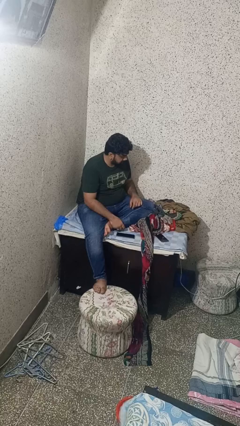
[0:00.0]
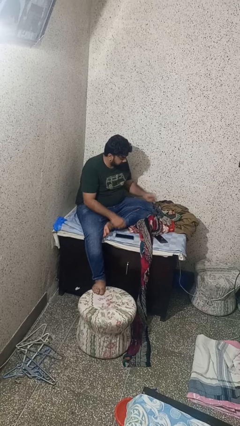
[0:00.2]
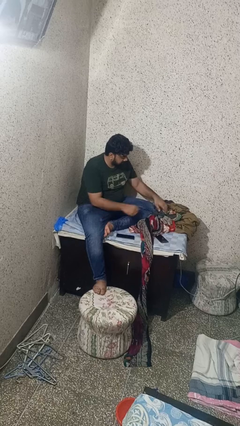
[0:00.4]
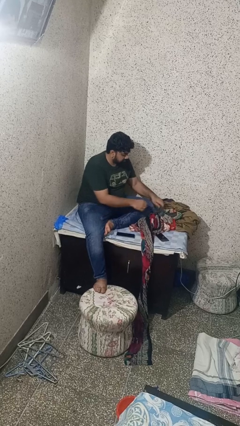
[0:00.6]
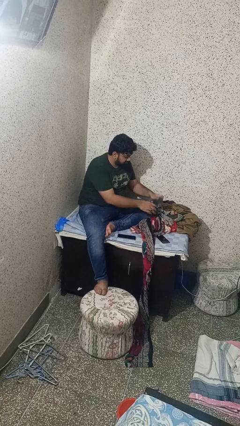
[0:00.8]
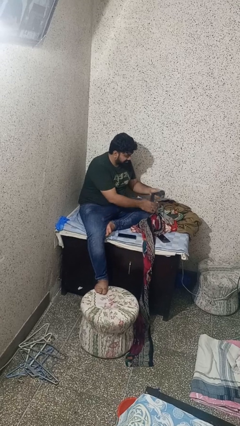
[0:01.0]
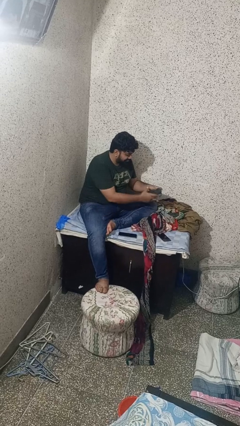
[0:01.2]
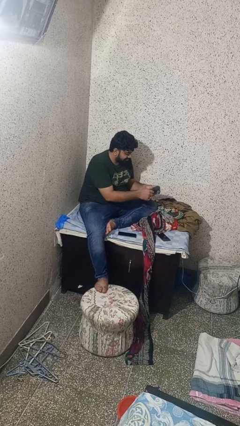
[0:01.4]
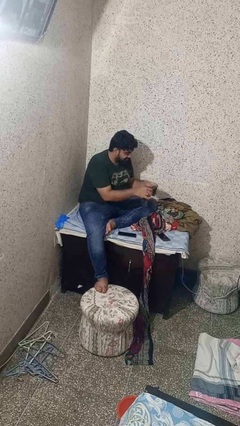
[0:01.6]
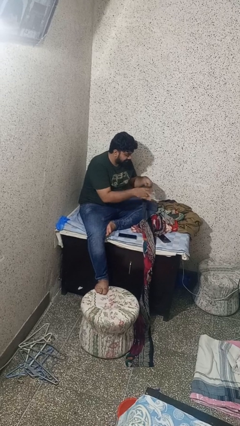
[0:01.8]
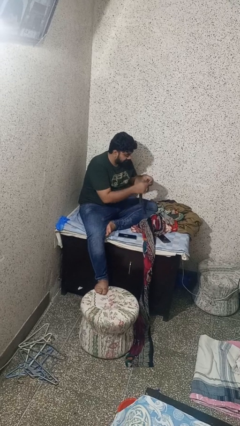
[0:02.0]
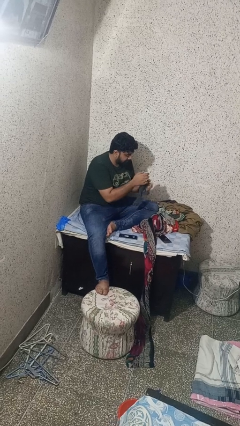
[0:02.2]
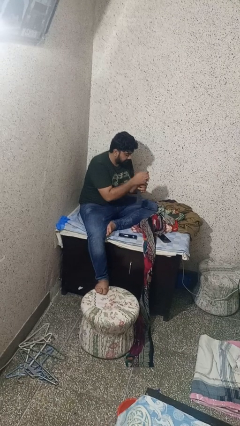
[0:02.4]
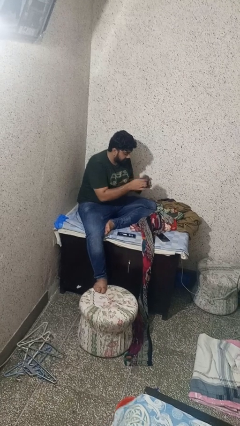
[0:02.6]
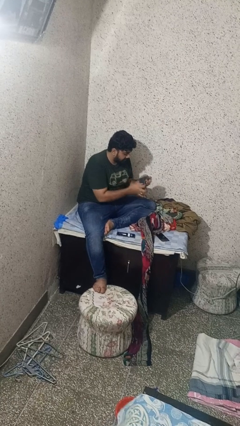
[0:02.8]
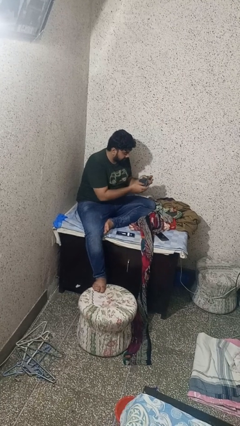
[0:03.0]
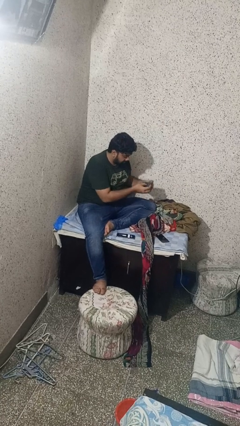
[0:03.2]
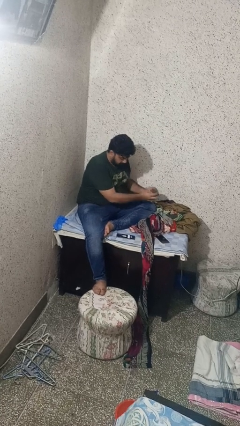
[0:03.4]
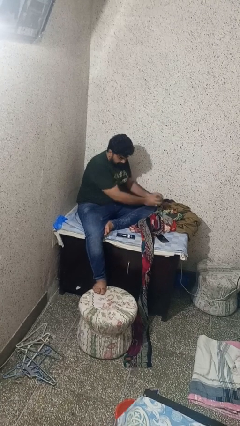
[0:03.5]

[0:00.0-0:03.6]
person folds socks

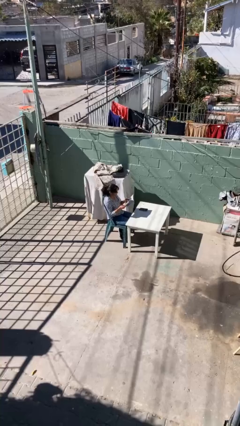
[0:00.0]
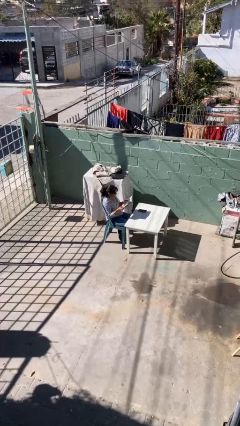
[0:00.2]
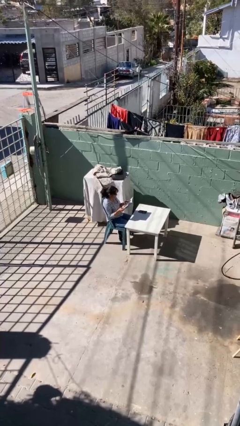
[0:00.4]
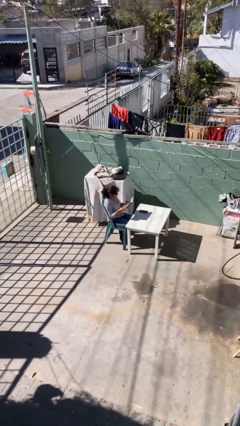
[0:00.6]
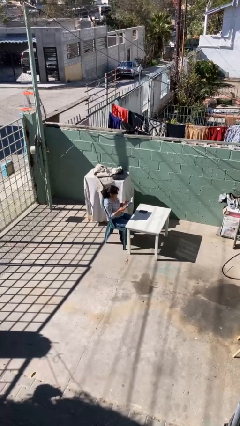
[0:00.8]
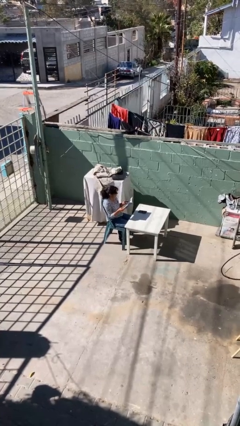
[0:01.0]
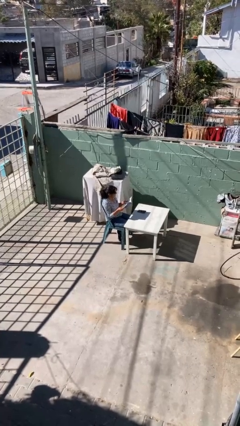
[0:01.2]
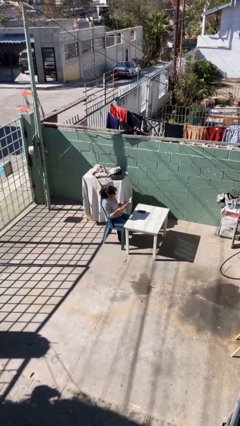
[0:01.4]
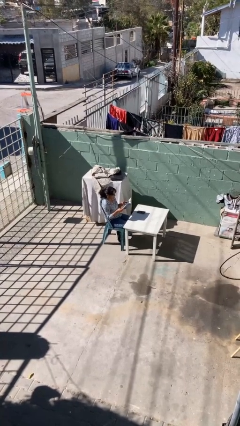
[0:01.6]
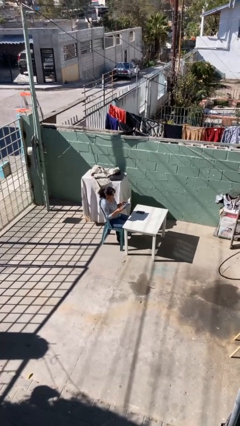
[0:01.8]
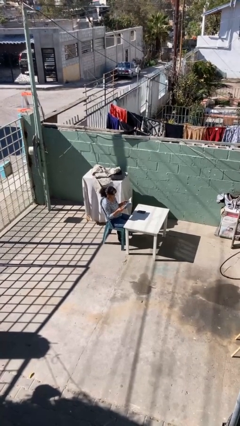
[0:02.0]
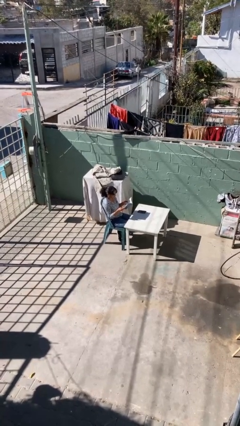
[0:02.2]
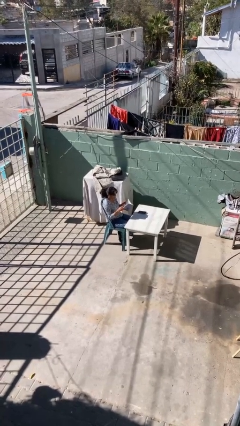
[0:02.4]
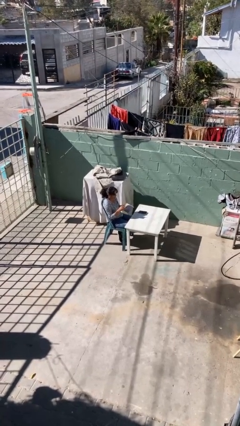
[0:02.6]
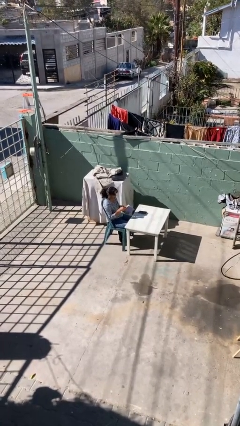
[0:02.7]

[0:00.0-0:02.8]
person reads document

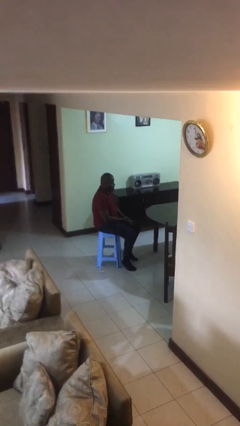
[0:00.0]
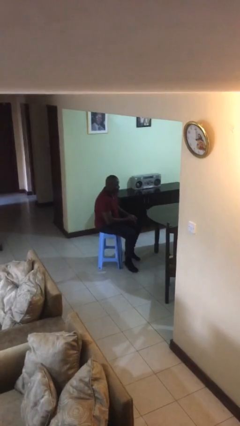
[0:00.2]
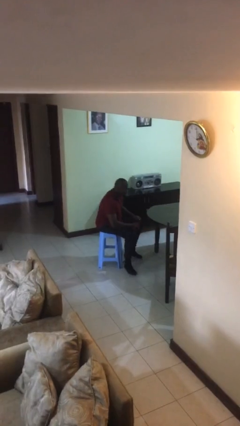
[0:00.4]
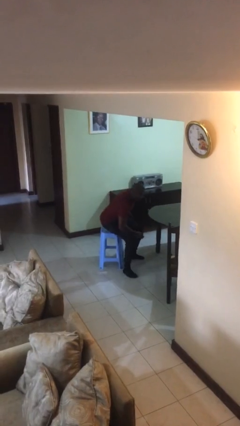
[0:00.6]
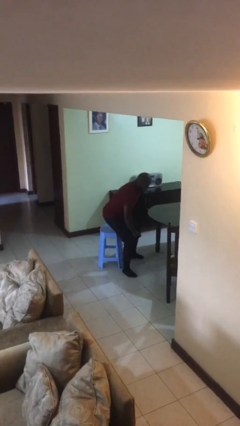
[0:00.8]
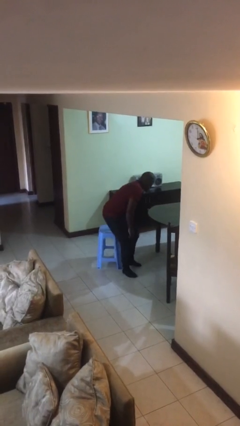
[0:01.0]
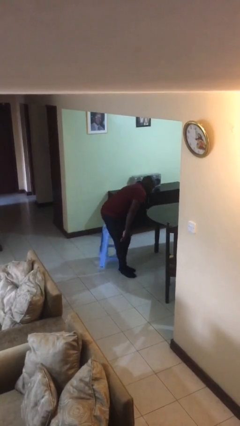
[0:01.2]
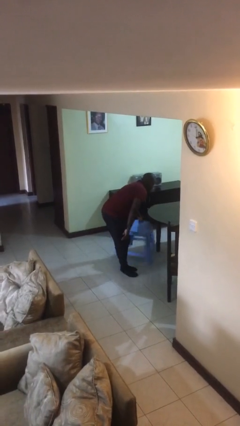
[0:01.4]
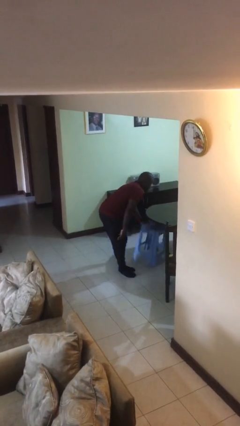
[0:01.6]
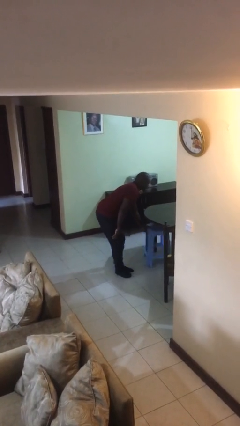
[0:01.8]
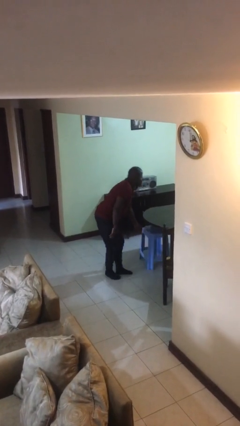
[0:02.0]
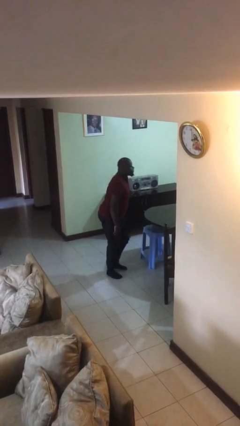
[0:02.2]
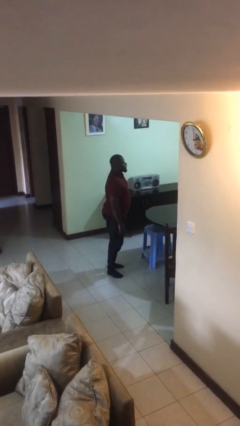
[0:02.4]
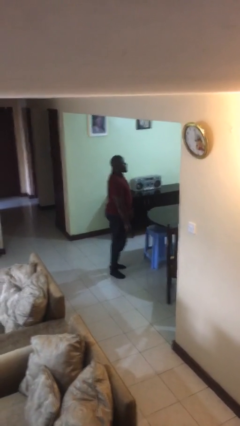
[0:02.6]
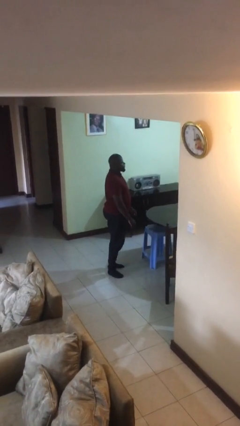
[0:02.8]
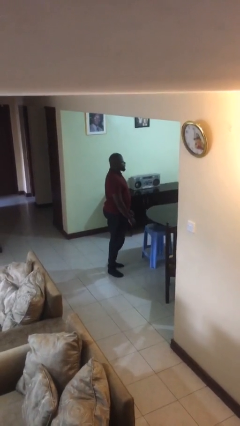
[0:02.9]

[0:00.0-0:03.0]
person stands up

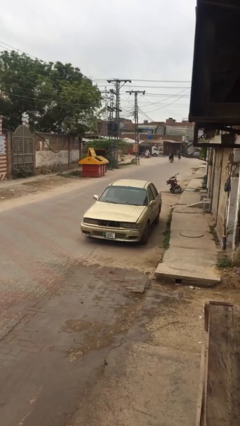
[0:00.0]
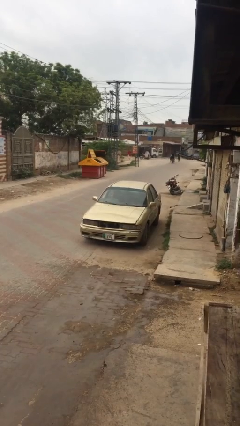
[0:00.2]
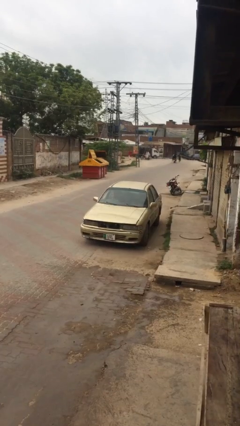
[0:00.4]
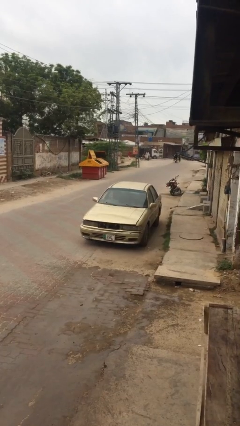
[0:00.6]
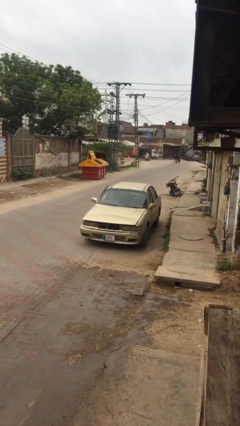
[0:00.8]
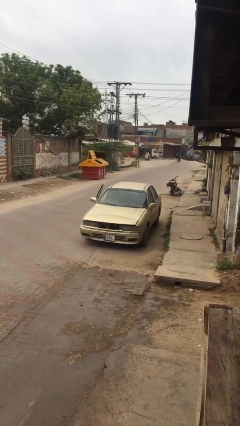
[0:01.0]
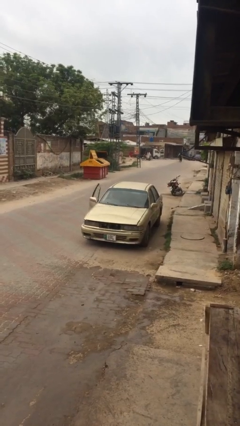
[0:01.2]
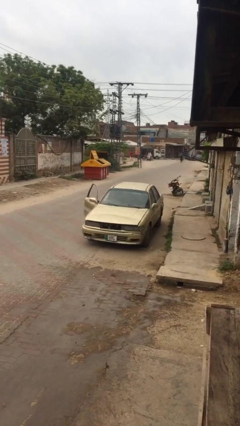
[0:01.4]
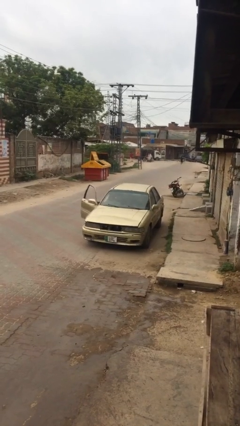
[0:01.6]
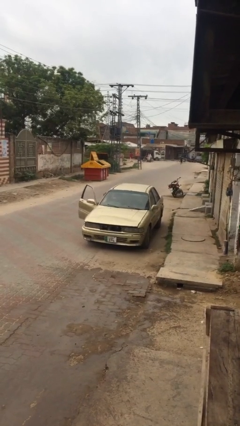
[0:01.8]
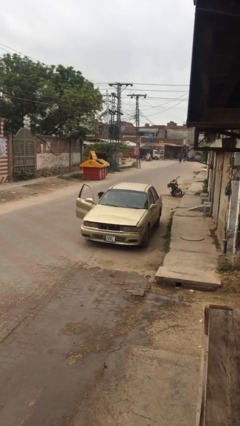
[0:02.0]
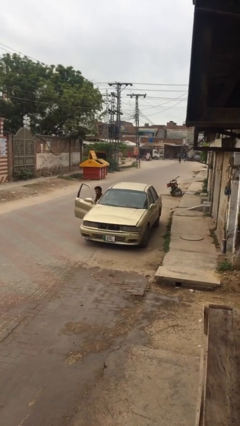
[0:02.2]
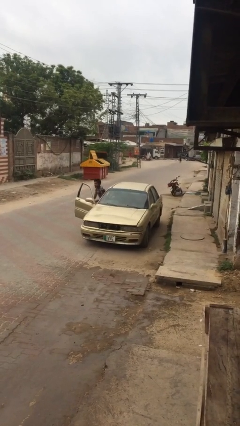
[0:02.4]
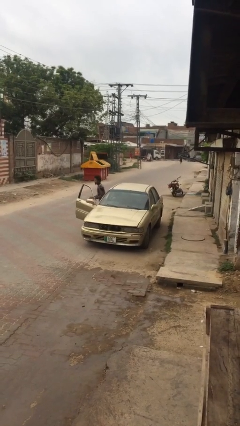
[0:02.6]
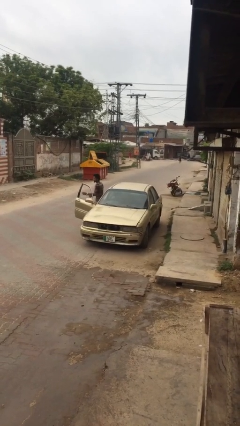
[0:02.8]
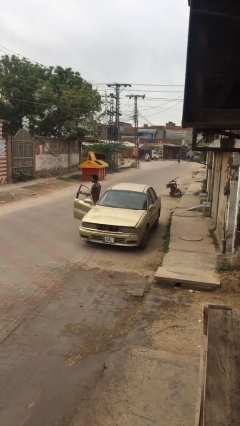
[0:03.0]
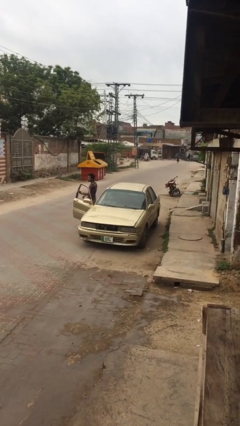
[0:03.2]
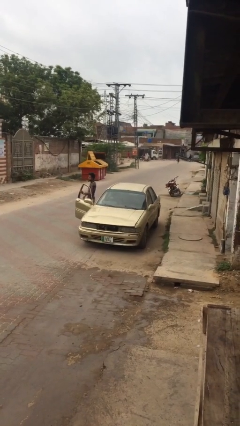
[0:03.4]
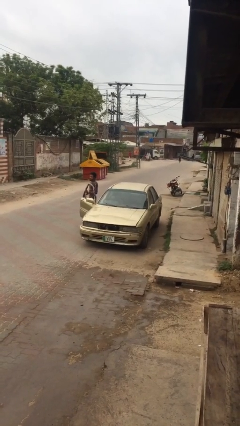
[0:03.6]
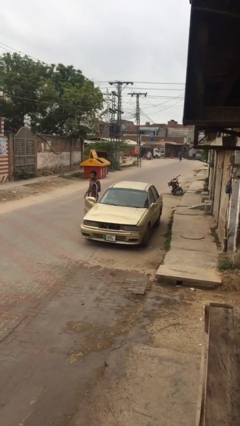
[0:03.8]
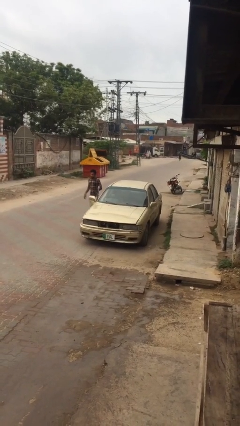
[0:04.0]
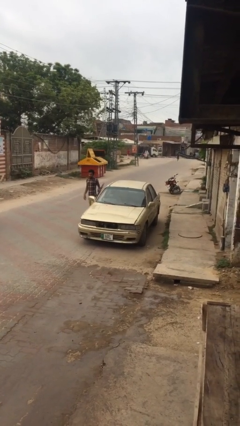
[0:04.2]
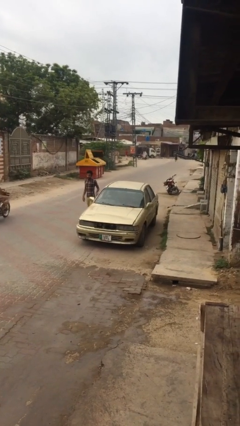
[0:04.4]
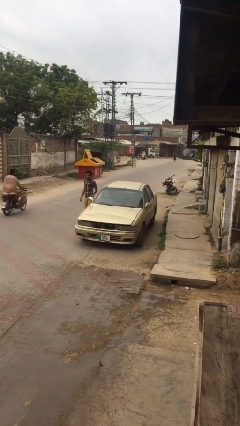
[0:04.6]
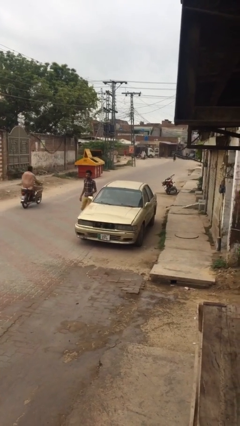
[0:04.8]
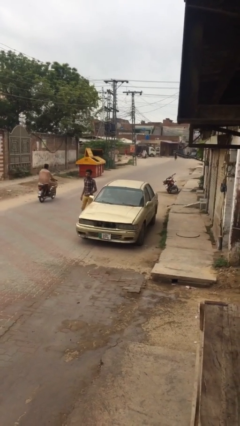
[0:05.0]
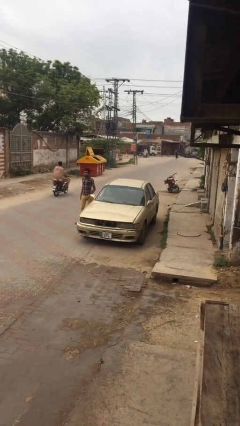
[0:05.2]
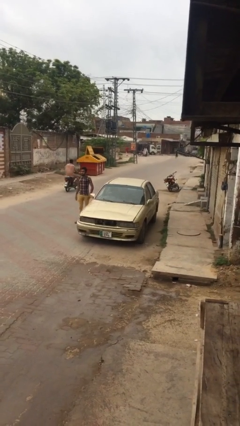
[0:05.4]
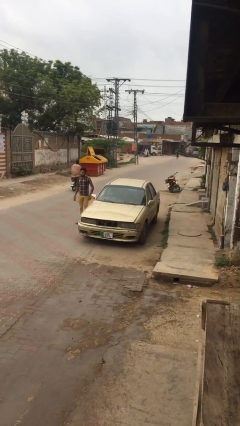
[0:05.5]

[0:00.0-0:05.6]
car drops off person

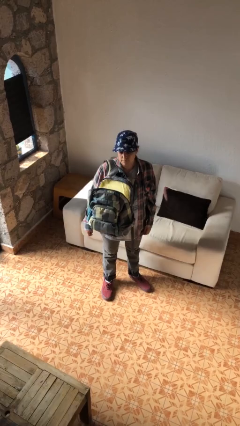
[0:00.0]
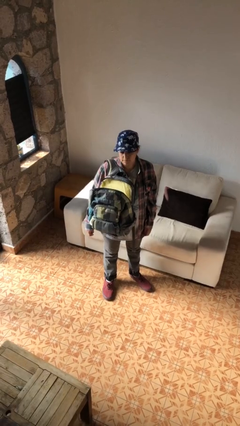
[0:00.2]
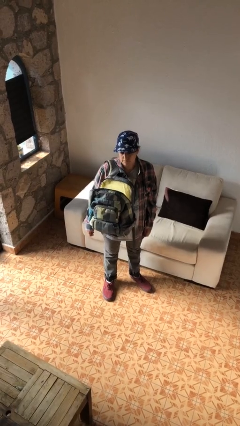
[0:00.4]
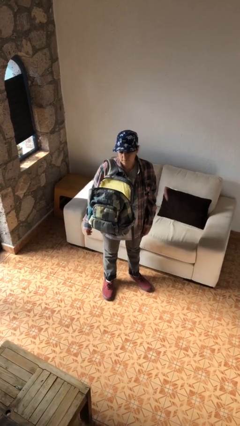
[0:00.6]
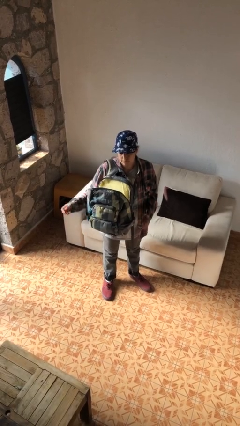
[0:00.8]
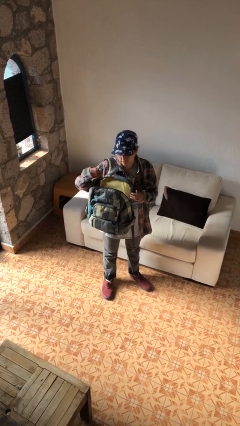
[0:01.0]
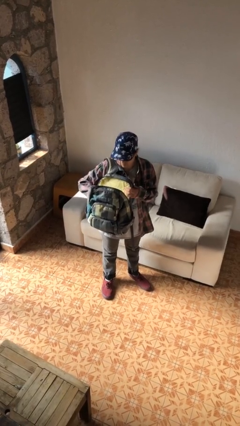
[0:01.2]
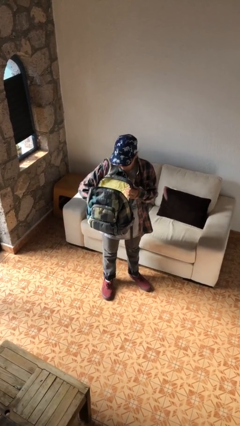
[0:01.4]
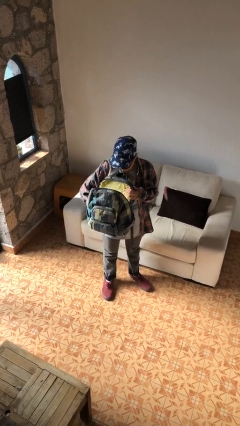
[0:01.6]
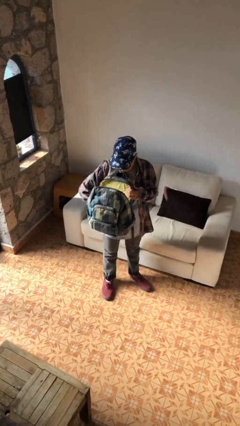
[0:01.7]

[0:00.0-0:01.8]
person searches in backpack

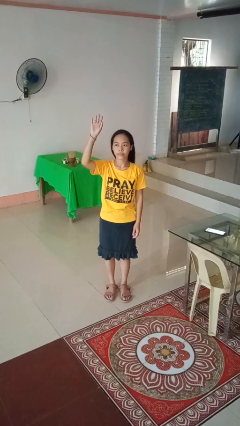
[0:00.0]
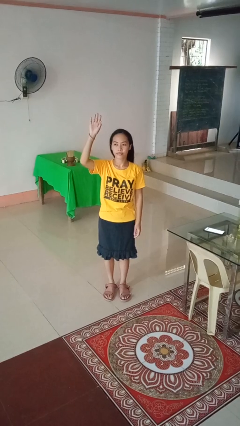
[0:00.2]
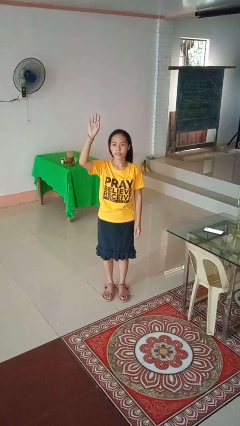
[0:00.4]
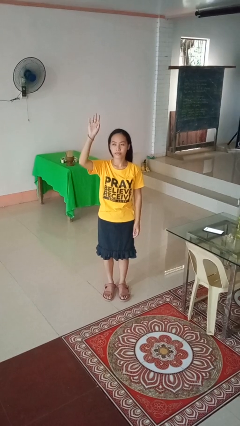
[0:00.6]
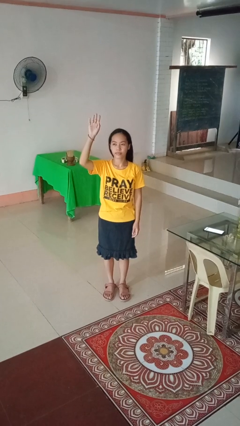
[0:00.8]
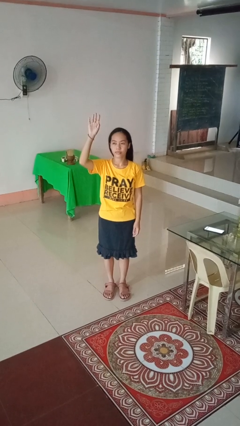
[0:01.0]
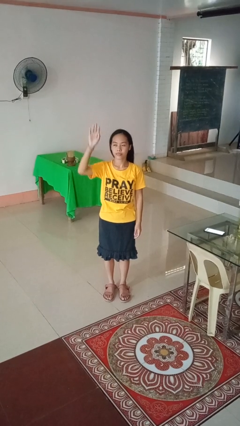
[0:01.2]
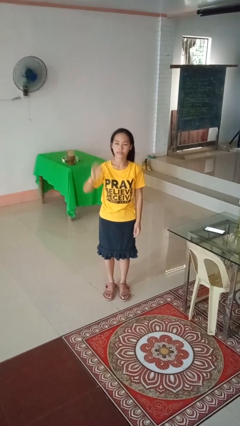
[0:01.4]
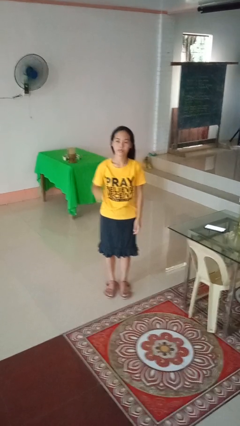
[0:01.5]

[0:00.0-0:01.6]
person gestures raise hand
